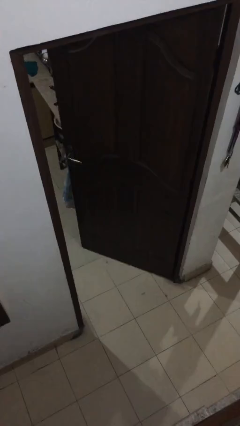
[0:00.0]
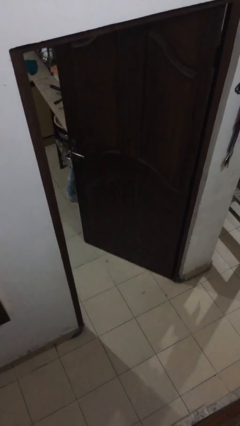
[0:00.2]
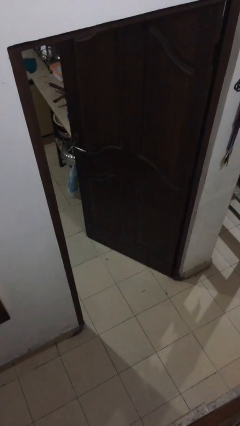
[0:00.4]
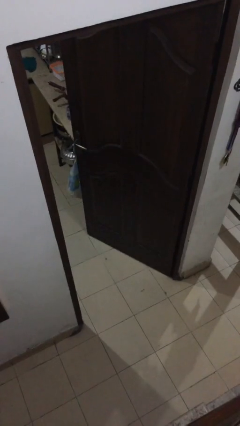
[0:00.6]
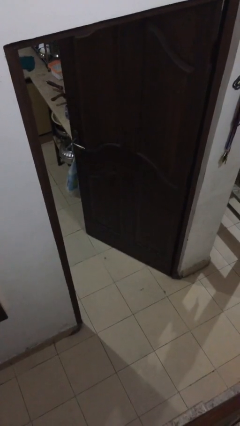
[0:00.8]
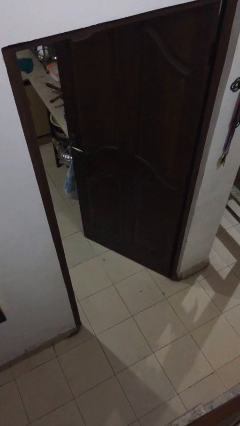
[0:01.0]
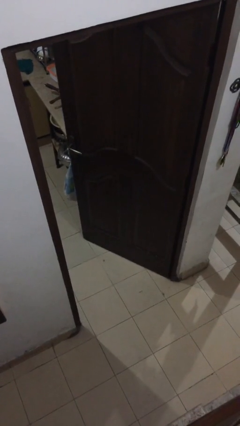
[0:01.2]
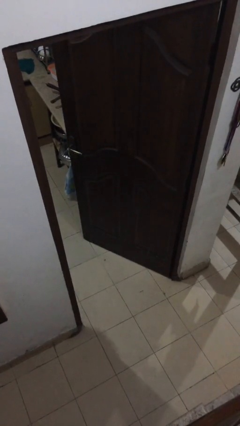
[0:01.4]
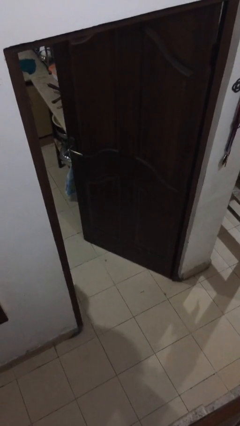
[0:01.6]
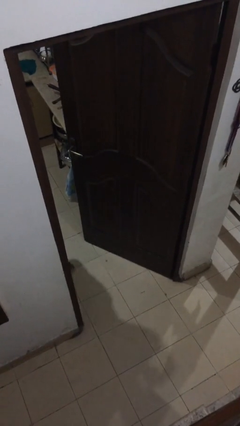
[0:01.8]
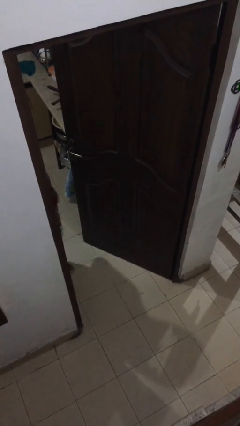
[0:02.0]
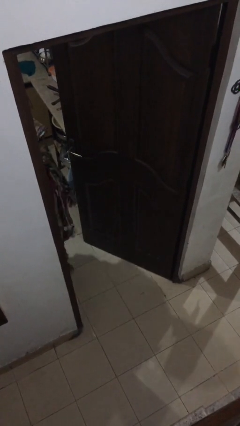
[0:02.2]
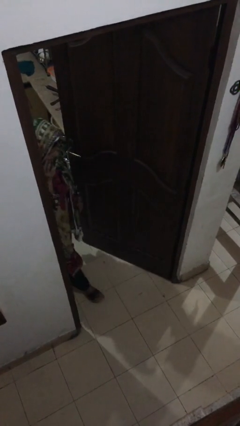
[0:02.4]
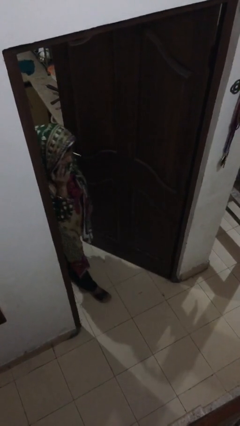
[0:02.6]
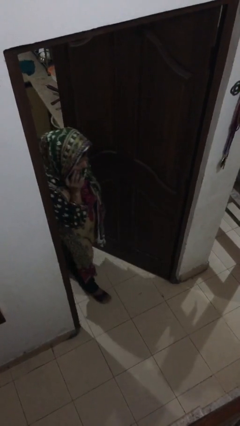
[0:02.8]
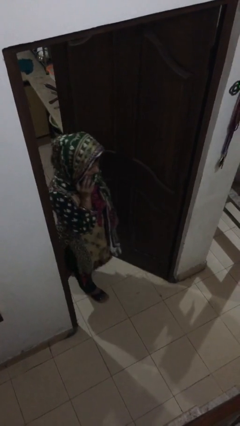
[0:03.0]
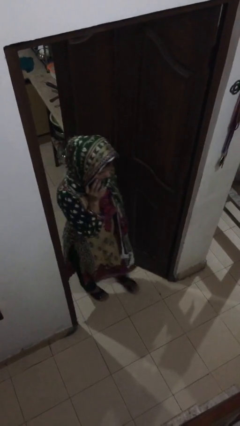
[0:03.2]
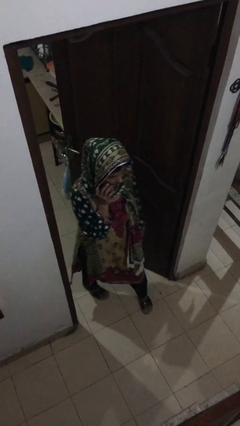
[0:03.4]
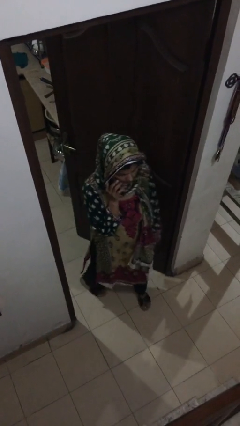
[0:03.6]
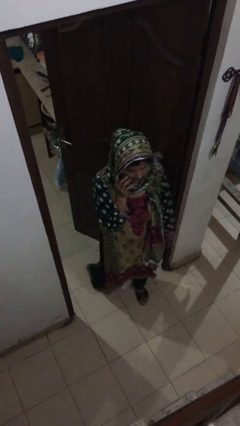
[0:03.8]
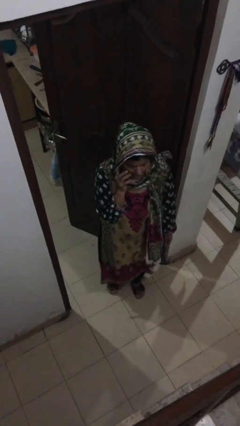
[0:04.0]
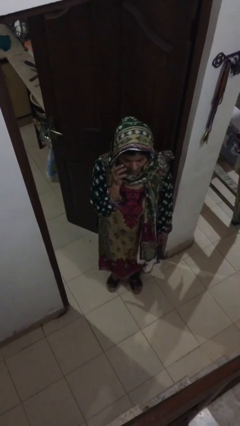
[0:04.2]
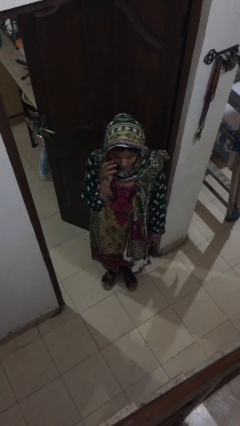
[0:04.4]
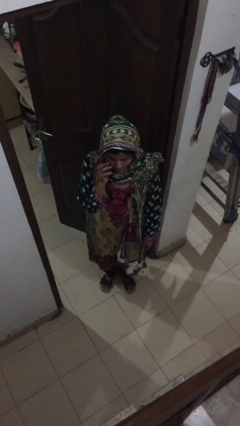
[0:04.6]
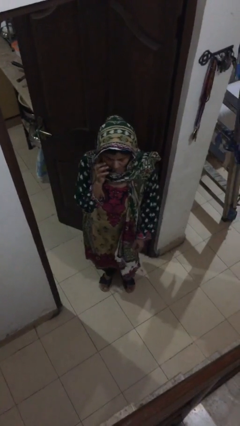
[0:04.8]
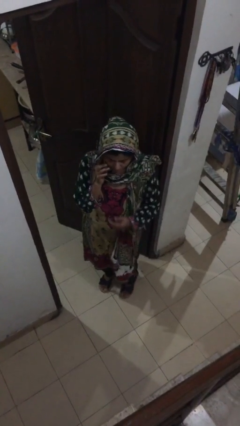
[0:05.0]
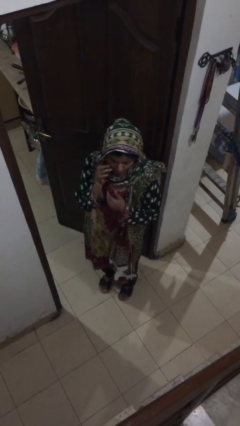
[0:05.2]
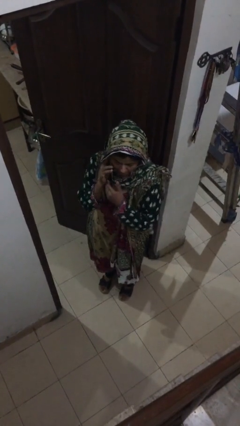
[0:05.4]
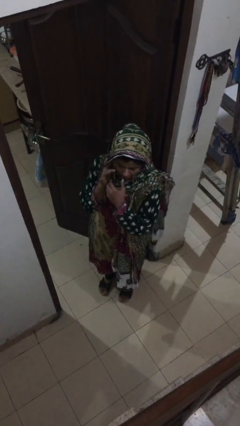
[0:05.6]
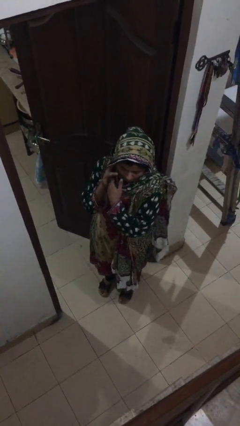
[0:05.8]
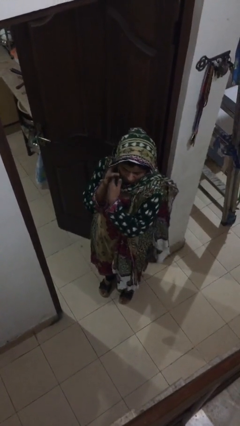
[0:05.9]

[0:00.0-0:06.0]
person enters scene through structure

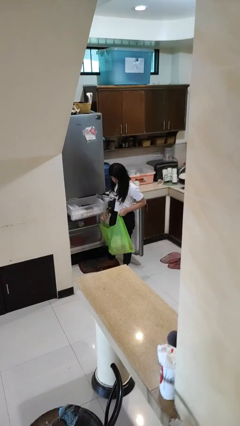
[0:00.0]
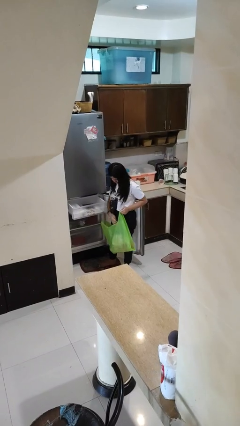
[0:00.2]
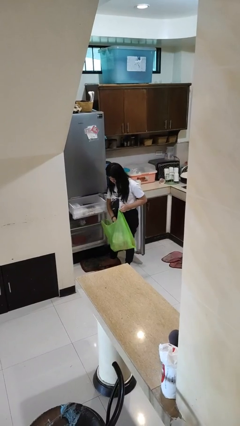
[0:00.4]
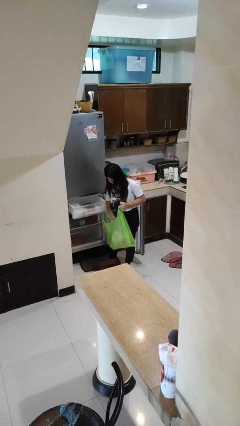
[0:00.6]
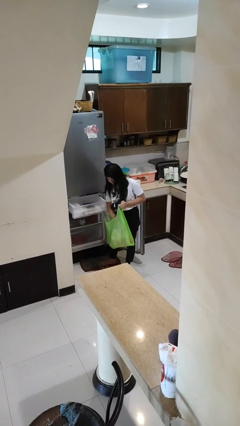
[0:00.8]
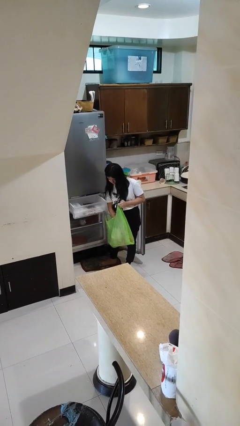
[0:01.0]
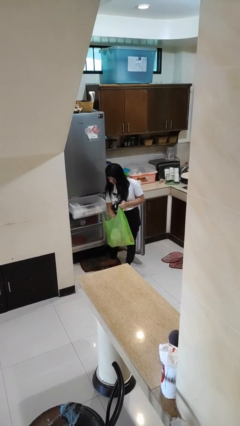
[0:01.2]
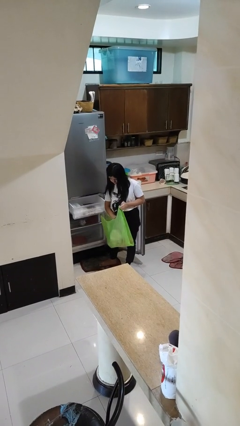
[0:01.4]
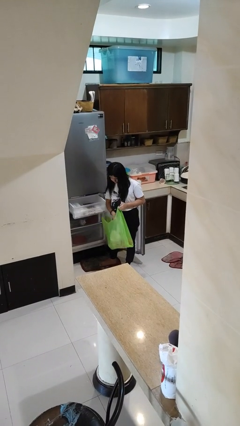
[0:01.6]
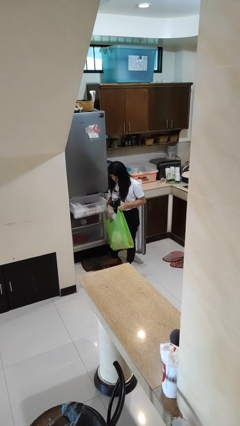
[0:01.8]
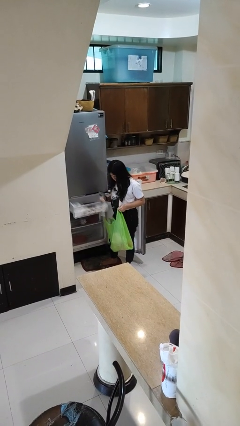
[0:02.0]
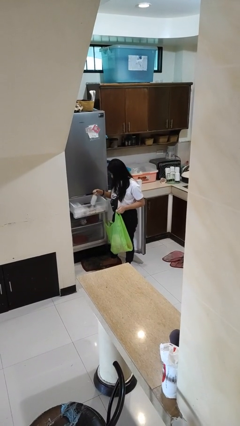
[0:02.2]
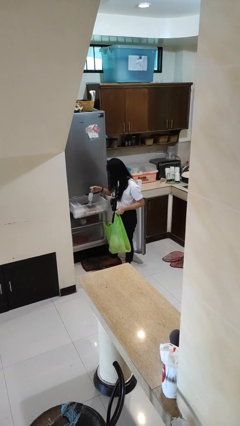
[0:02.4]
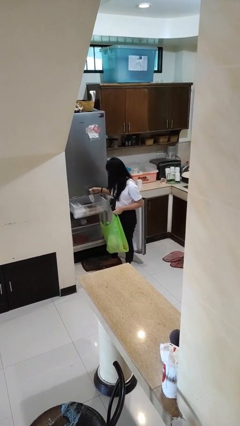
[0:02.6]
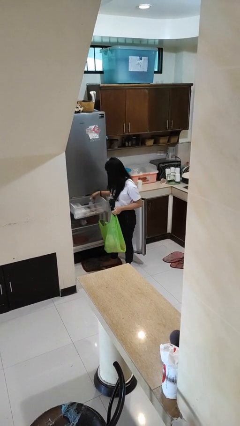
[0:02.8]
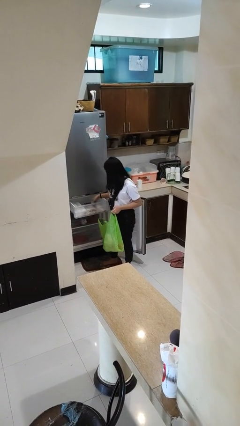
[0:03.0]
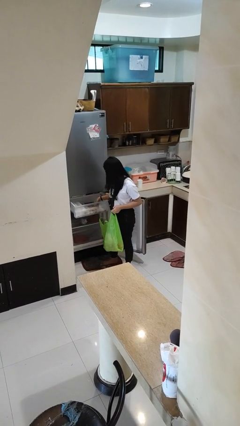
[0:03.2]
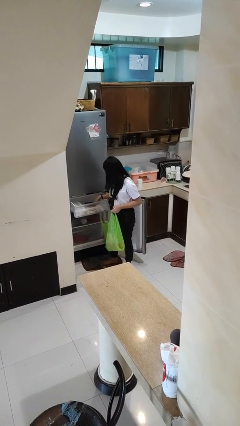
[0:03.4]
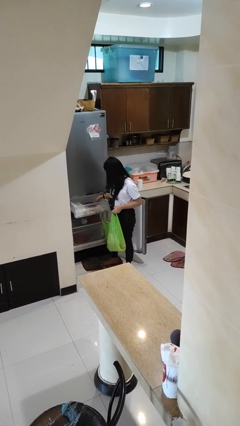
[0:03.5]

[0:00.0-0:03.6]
person loads groceries into refrigerator

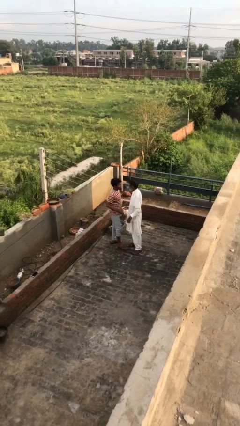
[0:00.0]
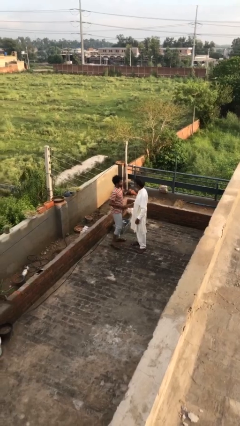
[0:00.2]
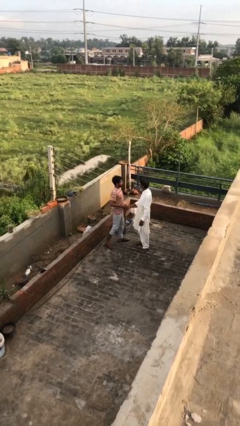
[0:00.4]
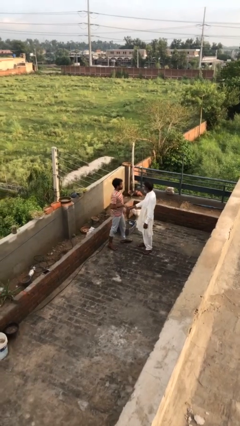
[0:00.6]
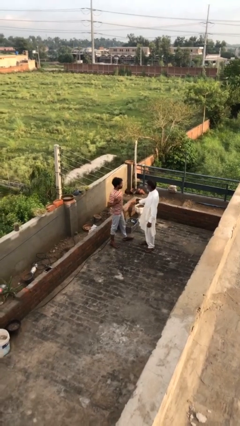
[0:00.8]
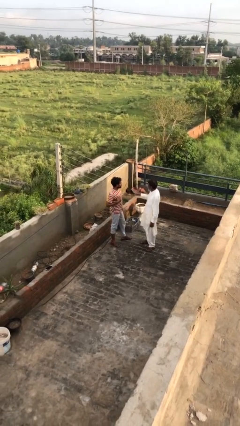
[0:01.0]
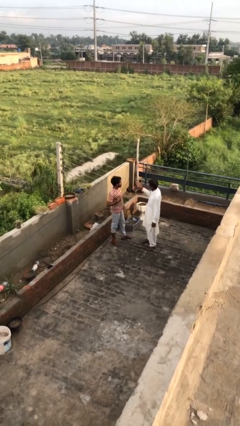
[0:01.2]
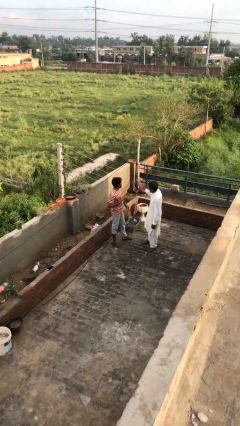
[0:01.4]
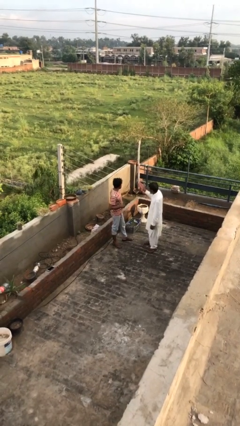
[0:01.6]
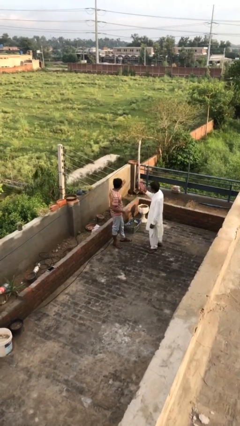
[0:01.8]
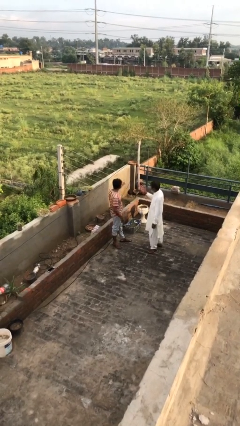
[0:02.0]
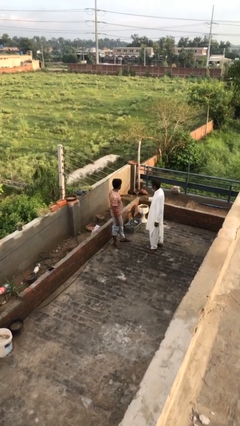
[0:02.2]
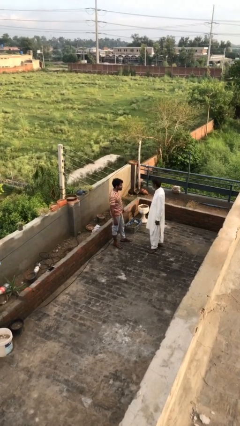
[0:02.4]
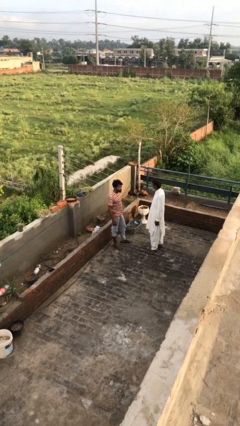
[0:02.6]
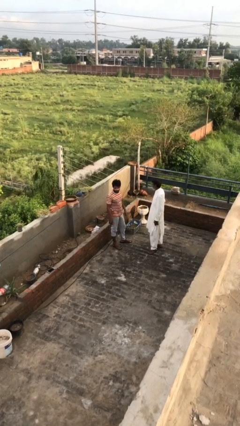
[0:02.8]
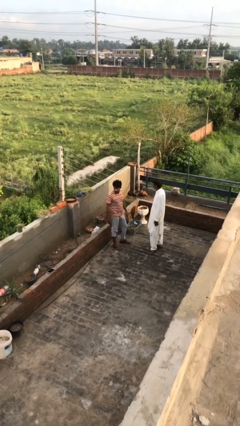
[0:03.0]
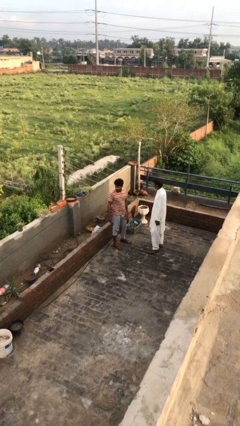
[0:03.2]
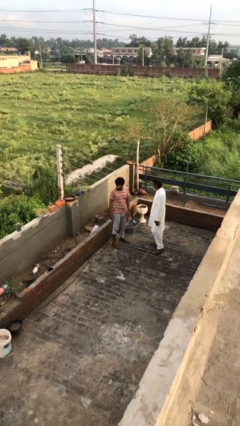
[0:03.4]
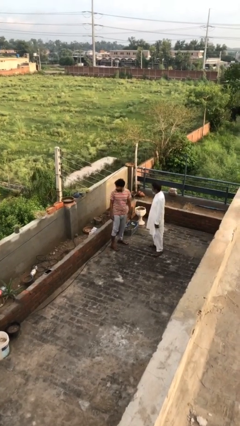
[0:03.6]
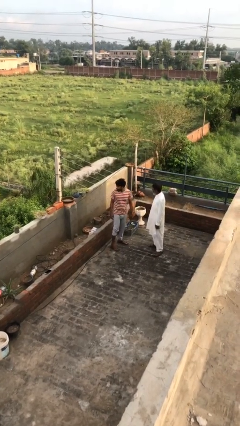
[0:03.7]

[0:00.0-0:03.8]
person talks to person

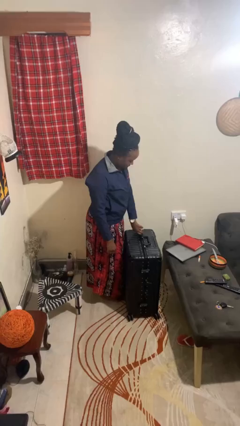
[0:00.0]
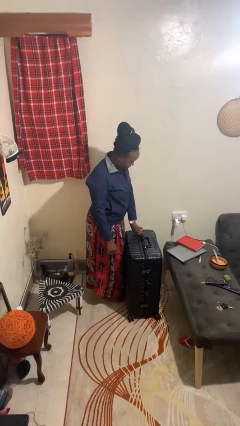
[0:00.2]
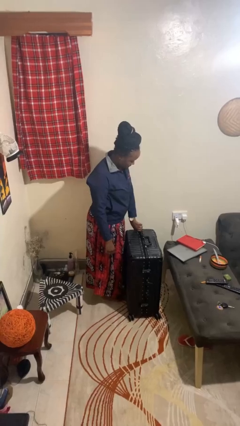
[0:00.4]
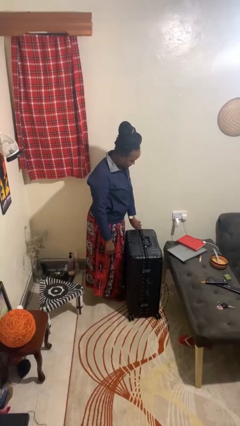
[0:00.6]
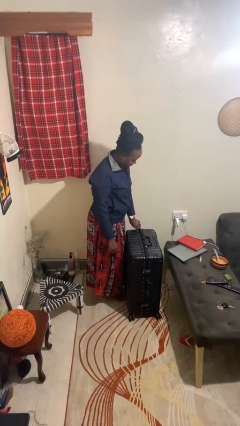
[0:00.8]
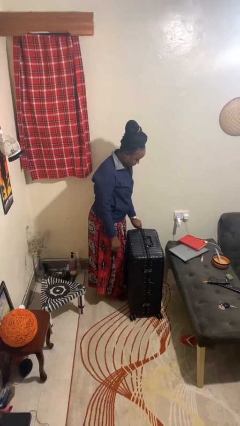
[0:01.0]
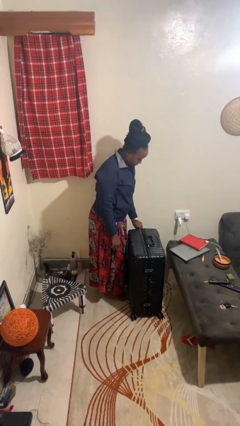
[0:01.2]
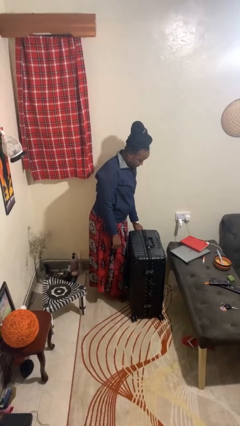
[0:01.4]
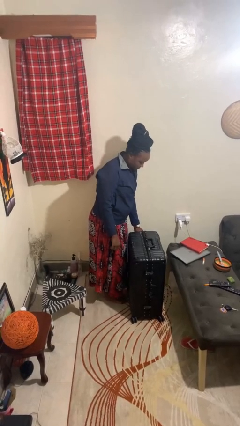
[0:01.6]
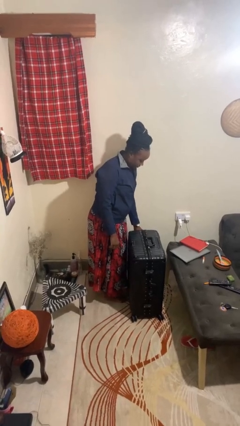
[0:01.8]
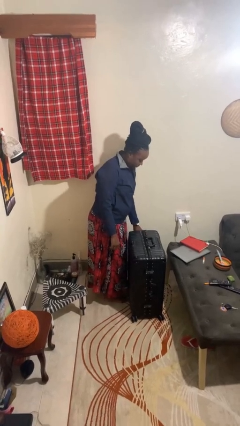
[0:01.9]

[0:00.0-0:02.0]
person closes suitcase

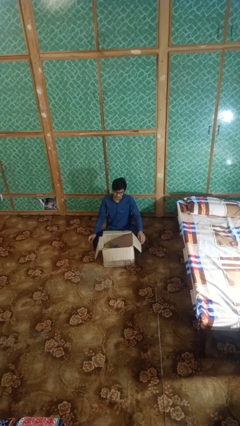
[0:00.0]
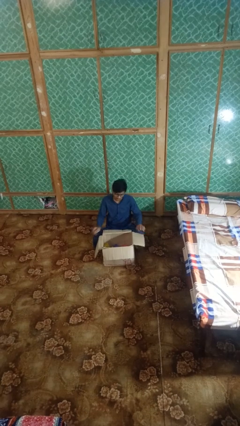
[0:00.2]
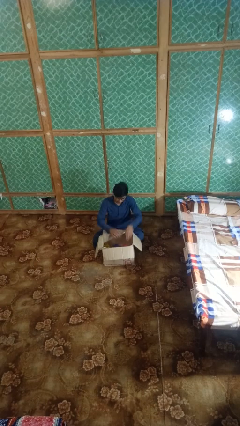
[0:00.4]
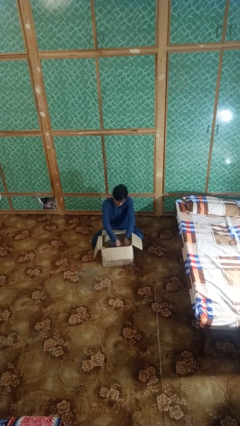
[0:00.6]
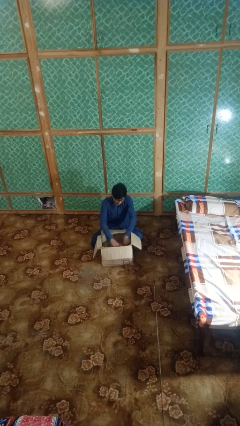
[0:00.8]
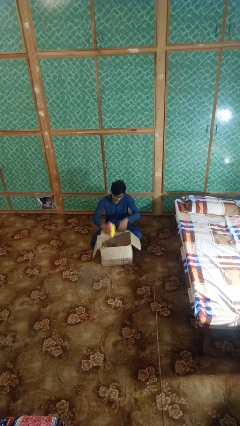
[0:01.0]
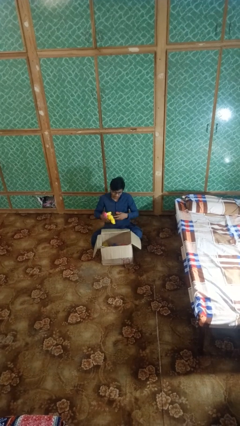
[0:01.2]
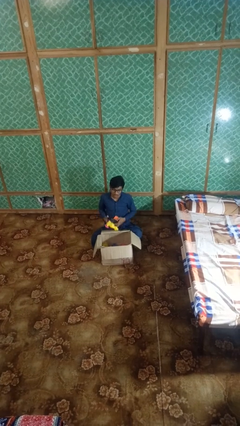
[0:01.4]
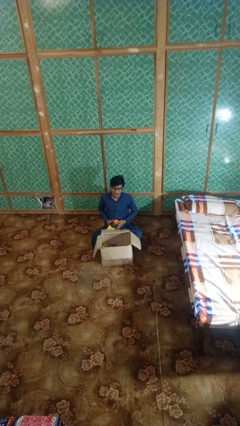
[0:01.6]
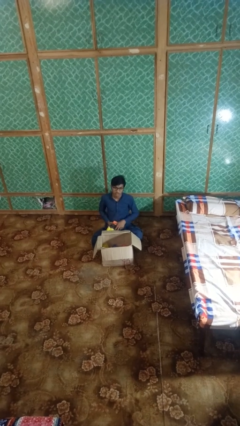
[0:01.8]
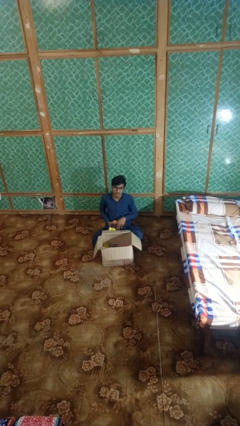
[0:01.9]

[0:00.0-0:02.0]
person takes object from box

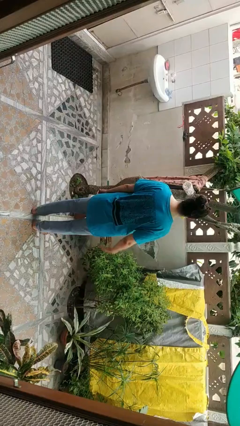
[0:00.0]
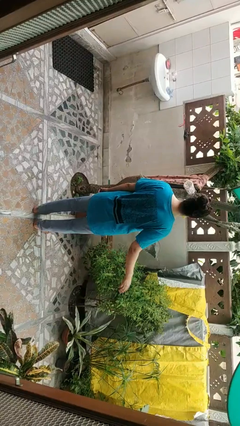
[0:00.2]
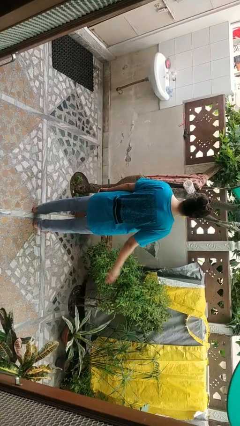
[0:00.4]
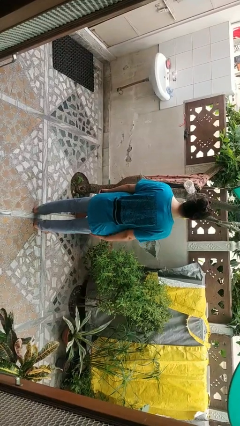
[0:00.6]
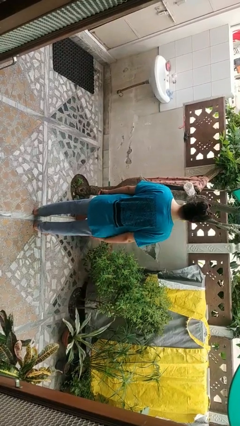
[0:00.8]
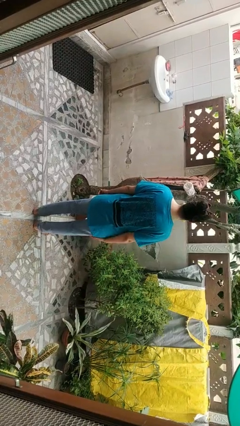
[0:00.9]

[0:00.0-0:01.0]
person slaps hands on thighs
